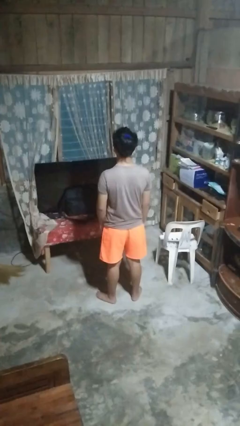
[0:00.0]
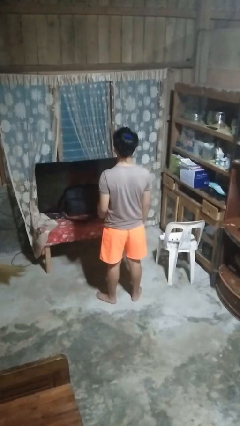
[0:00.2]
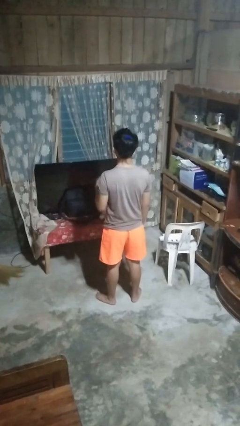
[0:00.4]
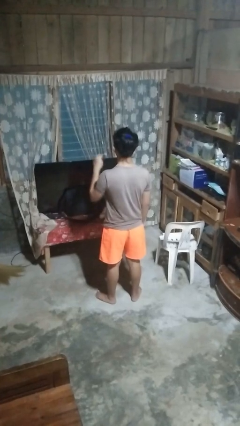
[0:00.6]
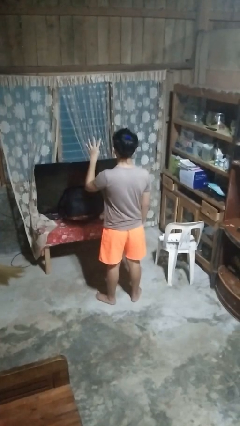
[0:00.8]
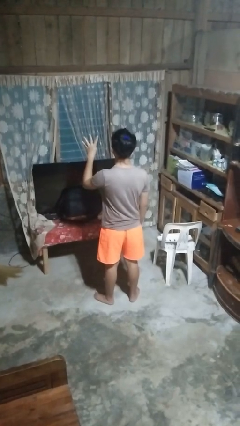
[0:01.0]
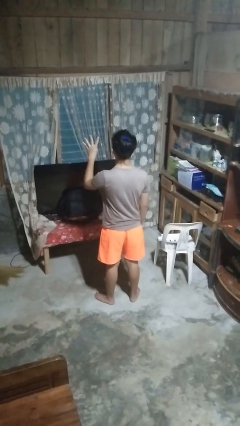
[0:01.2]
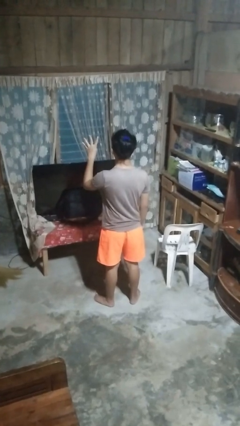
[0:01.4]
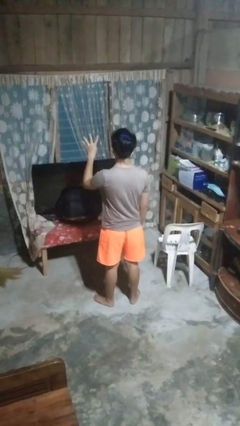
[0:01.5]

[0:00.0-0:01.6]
person gestures number four

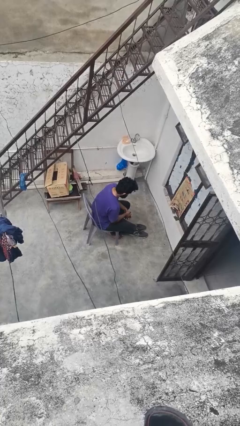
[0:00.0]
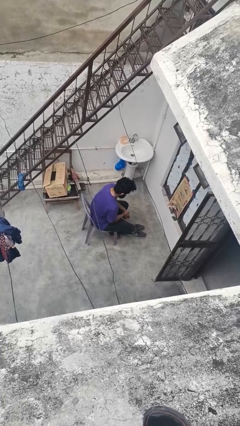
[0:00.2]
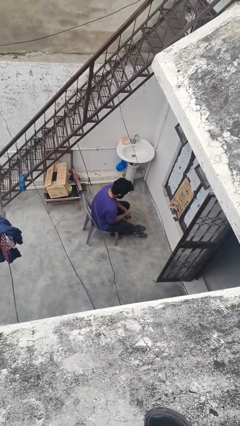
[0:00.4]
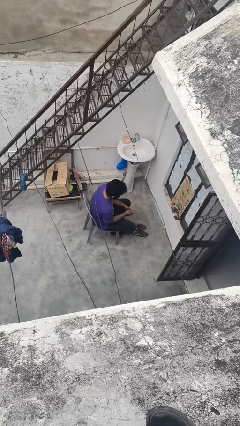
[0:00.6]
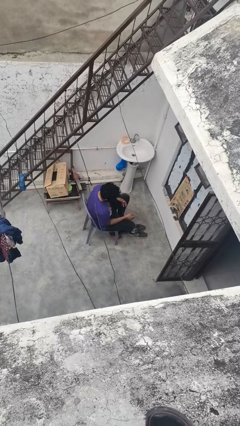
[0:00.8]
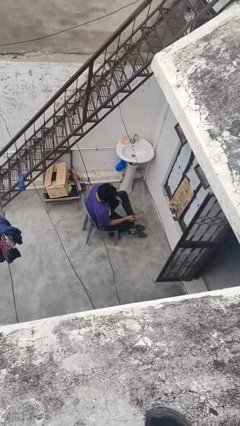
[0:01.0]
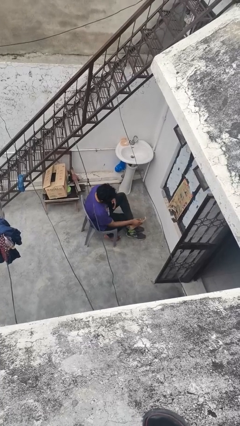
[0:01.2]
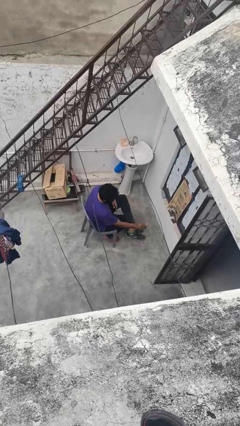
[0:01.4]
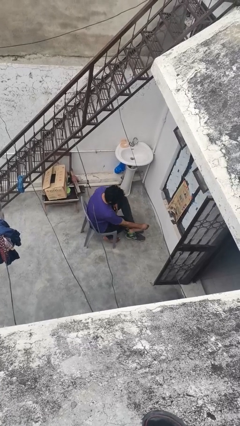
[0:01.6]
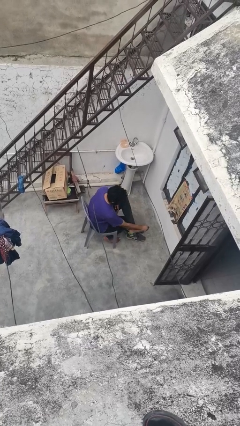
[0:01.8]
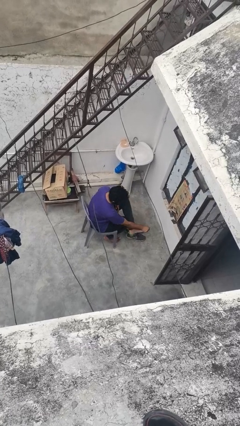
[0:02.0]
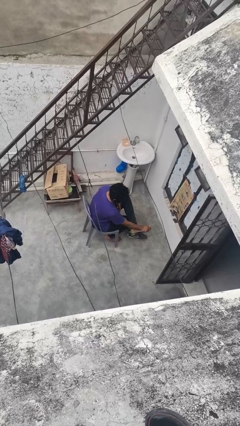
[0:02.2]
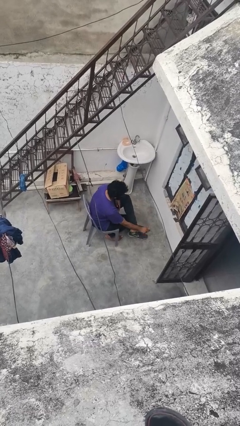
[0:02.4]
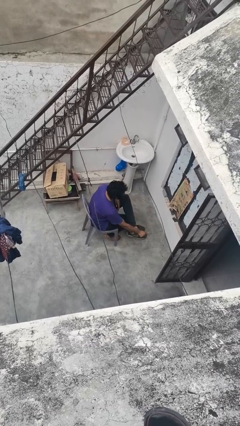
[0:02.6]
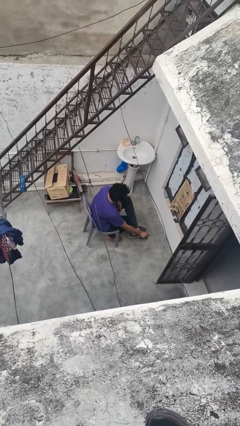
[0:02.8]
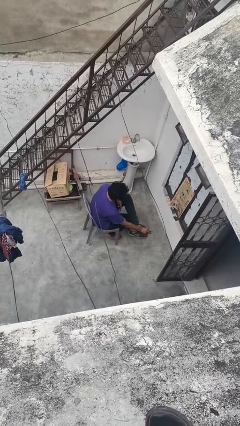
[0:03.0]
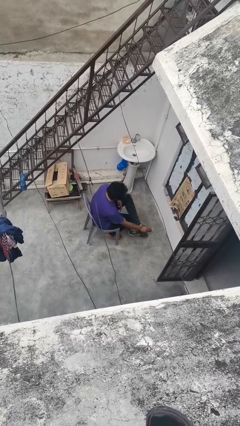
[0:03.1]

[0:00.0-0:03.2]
person rubs foot

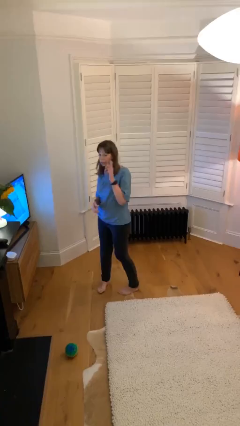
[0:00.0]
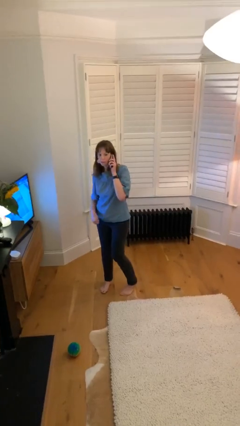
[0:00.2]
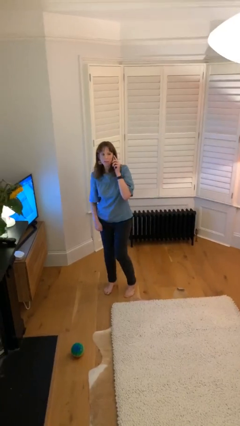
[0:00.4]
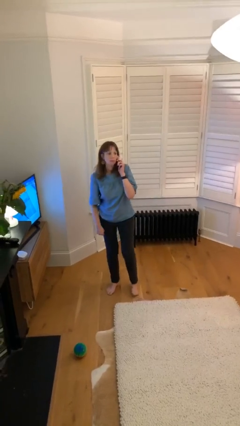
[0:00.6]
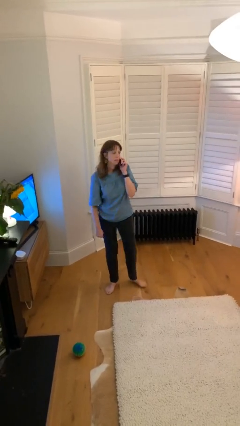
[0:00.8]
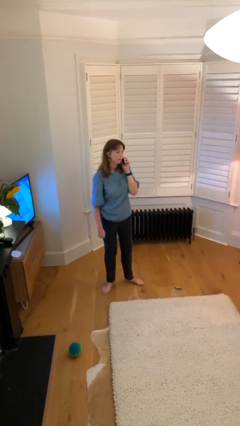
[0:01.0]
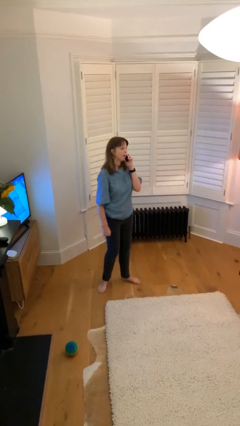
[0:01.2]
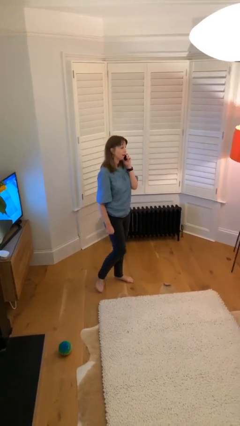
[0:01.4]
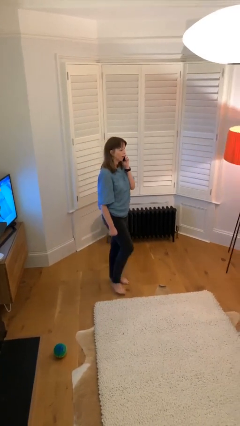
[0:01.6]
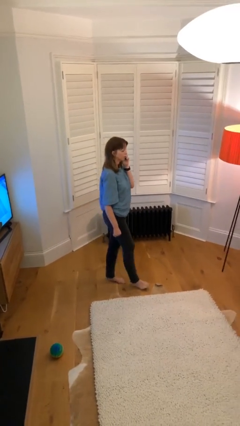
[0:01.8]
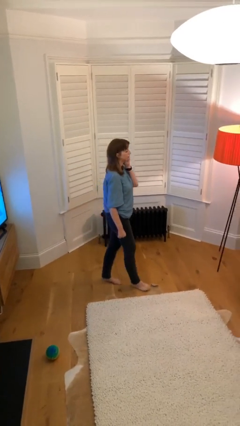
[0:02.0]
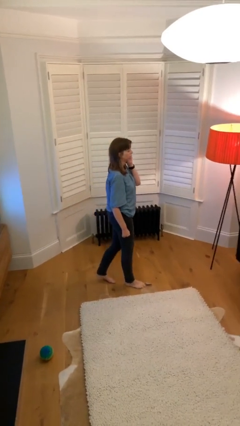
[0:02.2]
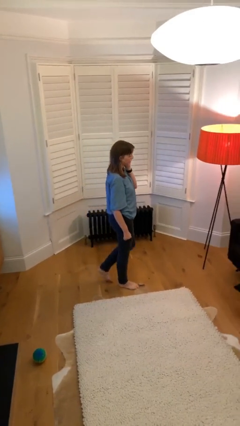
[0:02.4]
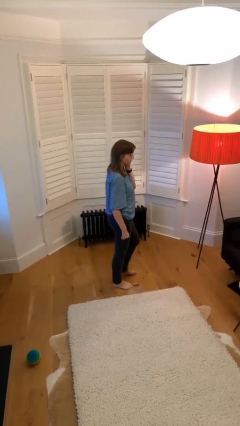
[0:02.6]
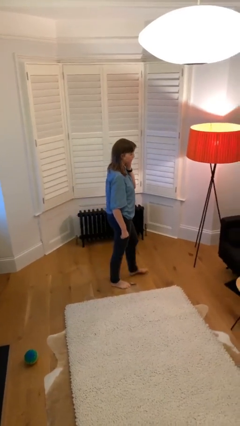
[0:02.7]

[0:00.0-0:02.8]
person talks on phone

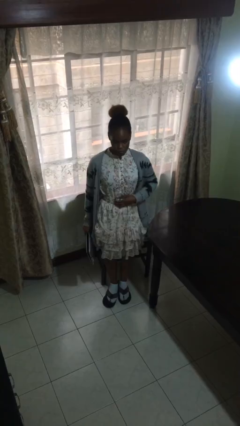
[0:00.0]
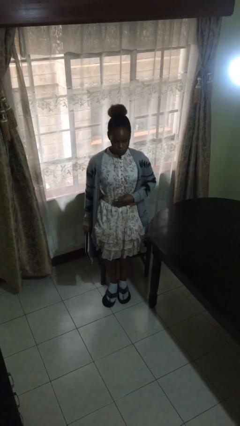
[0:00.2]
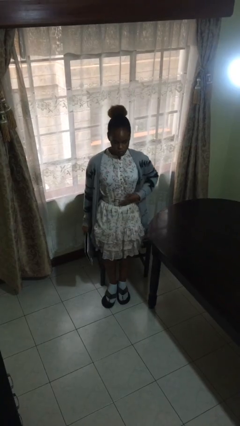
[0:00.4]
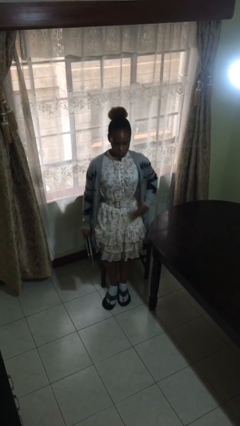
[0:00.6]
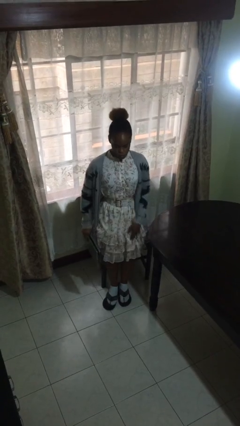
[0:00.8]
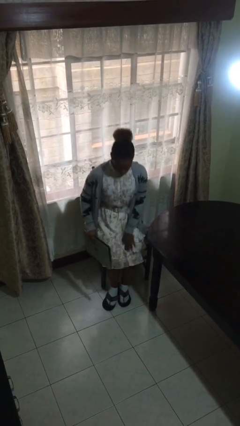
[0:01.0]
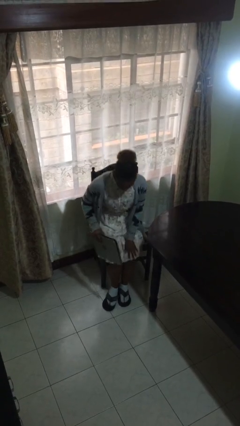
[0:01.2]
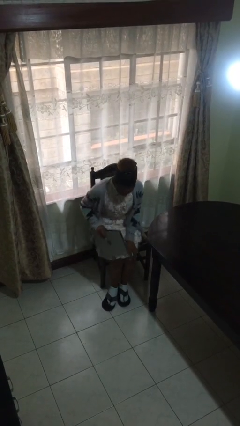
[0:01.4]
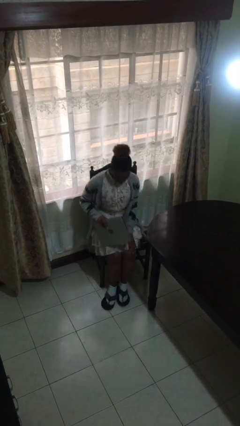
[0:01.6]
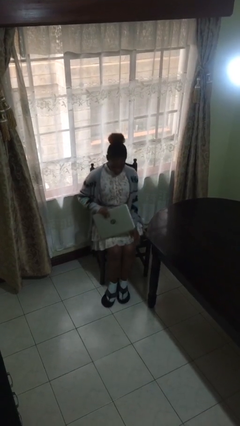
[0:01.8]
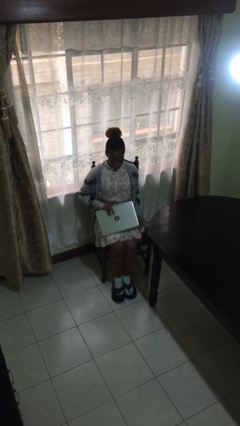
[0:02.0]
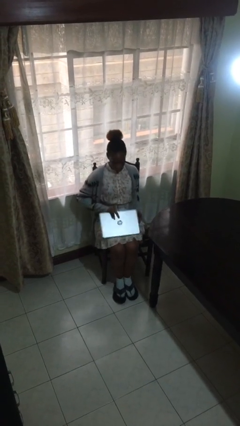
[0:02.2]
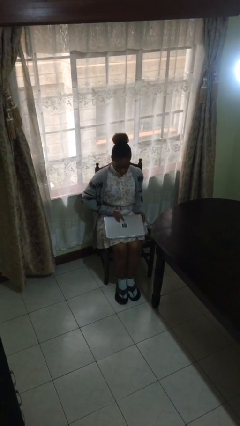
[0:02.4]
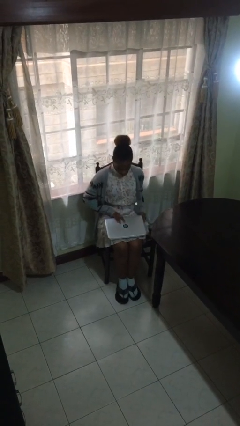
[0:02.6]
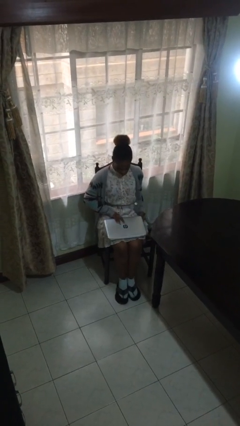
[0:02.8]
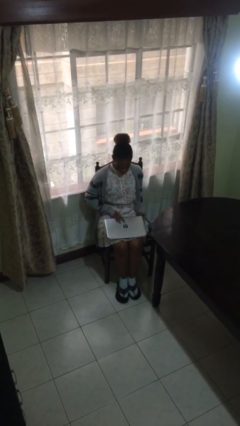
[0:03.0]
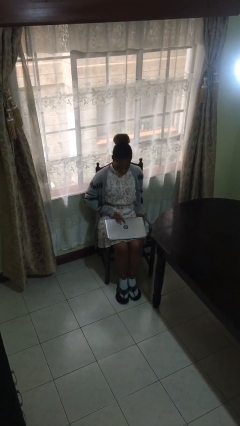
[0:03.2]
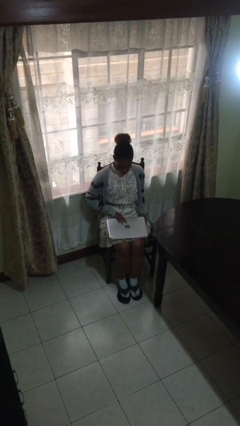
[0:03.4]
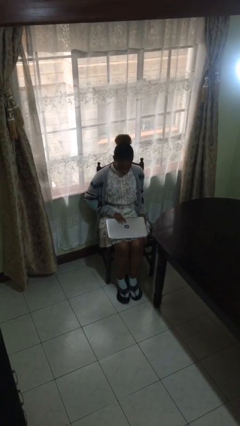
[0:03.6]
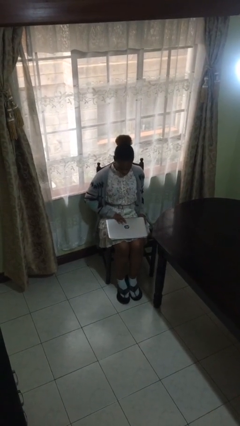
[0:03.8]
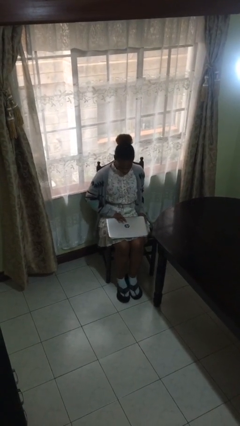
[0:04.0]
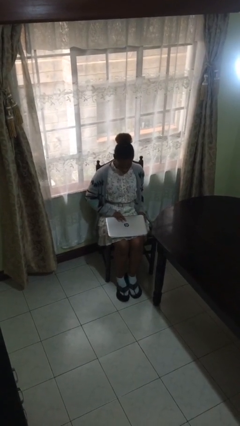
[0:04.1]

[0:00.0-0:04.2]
person sits down

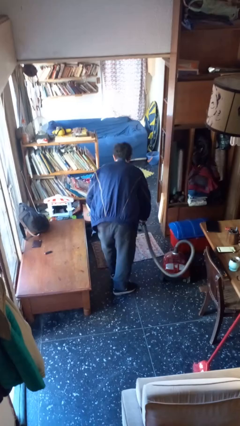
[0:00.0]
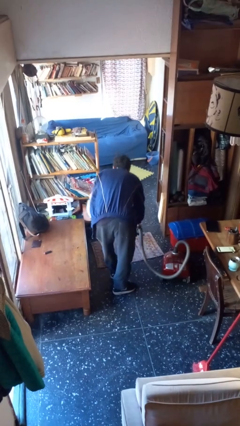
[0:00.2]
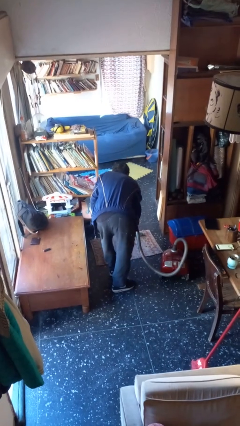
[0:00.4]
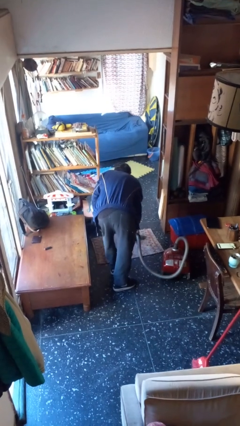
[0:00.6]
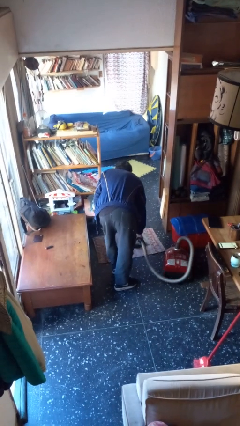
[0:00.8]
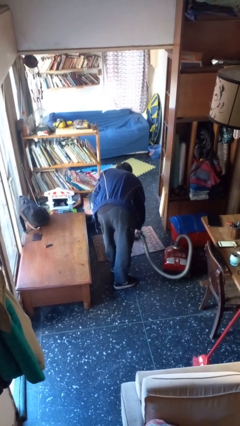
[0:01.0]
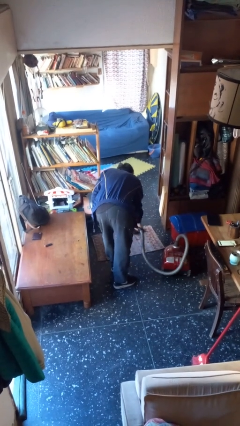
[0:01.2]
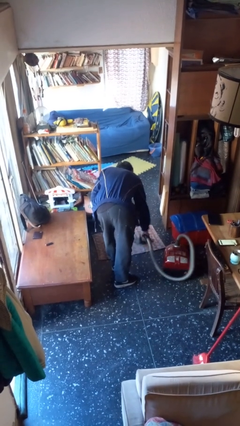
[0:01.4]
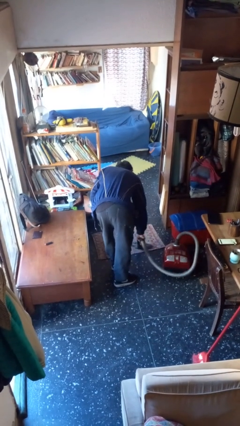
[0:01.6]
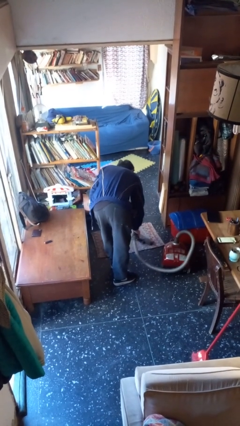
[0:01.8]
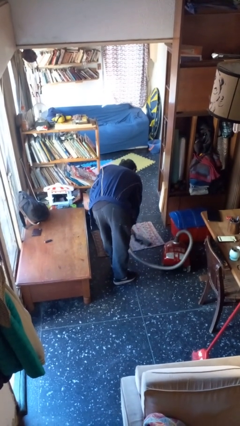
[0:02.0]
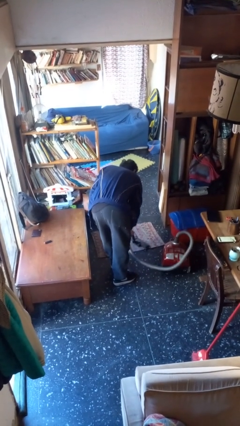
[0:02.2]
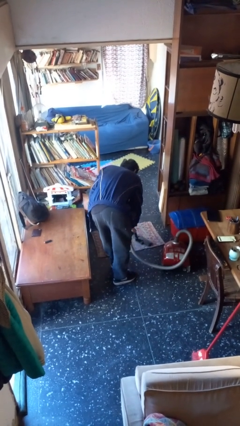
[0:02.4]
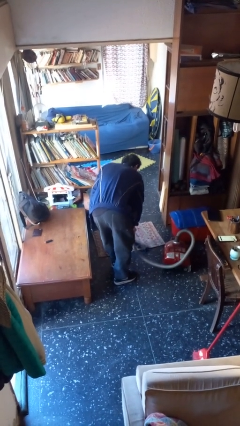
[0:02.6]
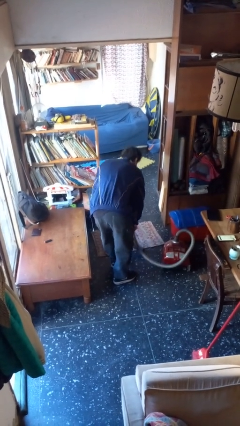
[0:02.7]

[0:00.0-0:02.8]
person vacuums carpet

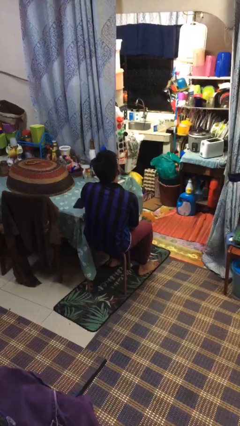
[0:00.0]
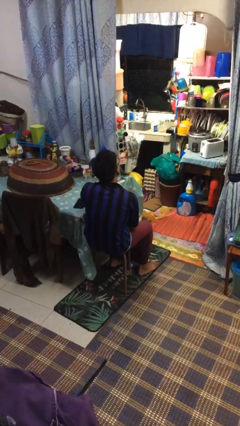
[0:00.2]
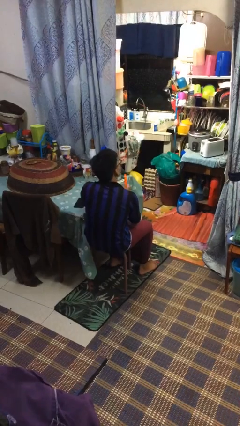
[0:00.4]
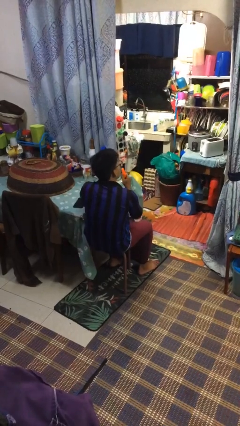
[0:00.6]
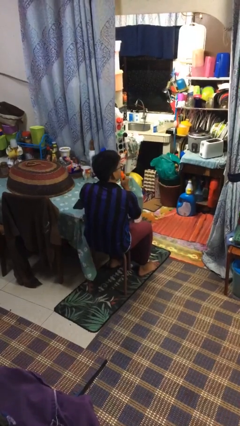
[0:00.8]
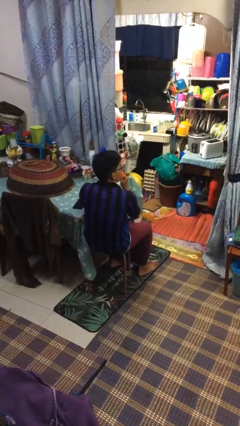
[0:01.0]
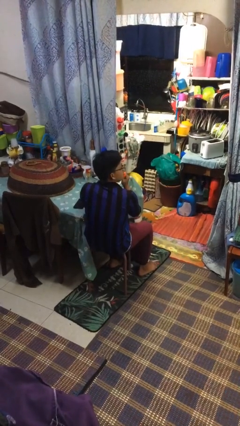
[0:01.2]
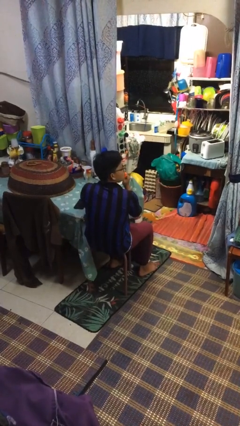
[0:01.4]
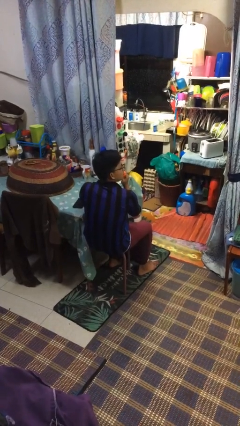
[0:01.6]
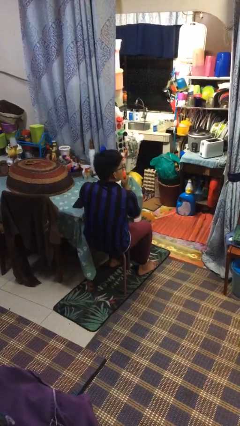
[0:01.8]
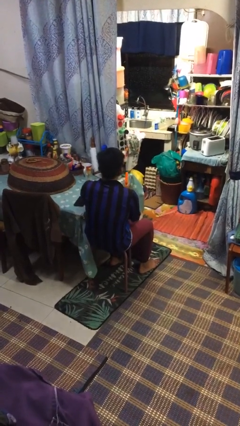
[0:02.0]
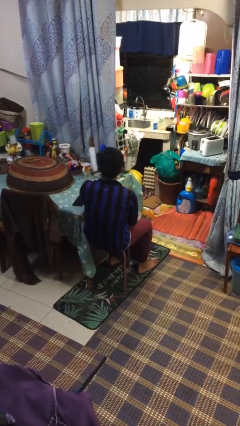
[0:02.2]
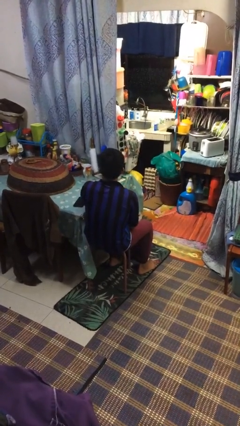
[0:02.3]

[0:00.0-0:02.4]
person vapes

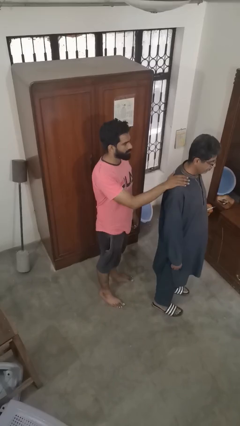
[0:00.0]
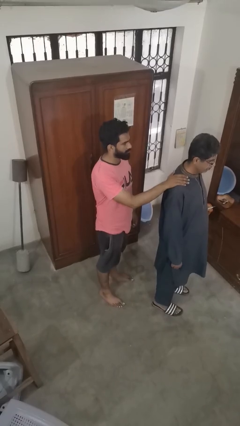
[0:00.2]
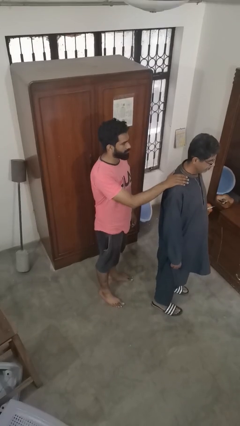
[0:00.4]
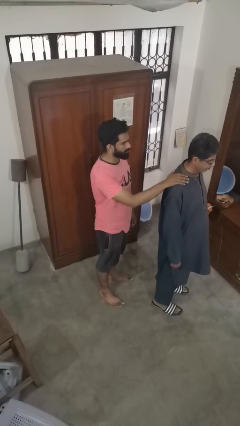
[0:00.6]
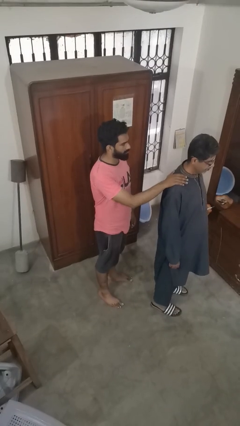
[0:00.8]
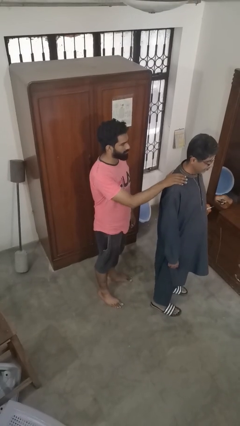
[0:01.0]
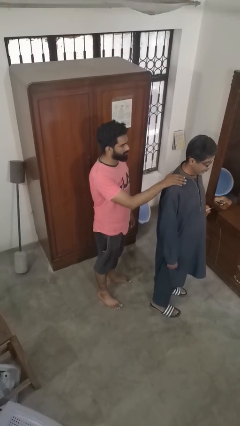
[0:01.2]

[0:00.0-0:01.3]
person grabs person by shoulder
